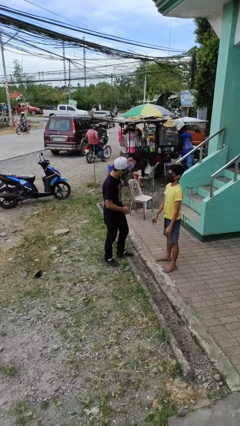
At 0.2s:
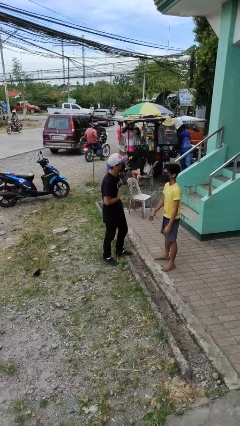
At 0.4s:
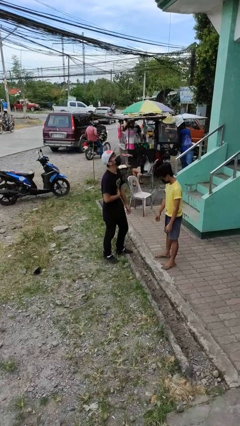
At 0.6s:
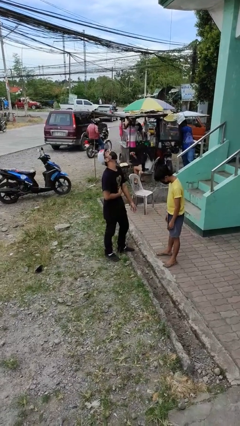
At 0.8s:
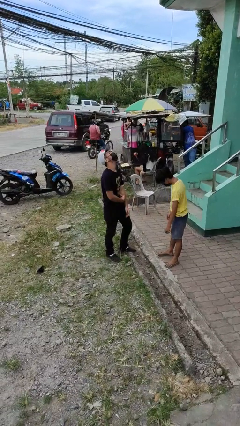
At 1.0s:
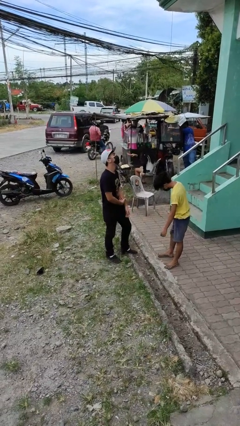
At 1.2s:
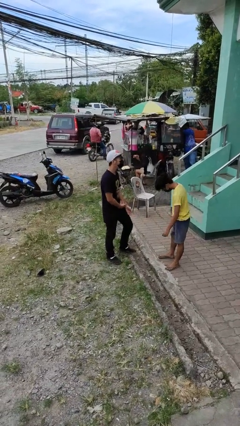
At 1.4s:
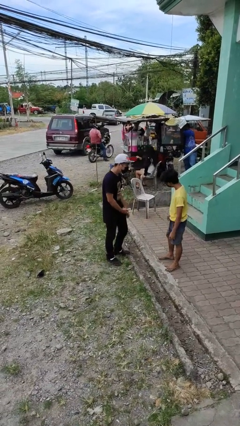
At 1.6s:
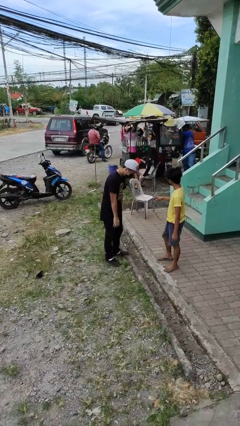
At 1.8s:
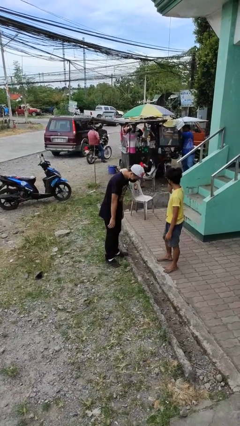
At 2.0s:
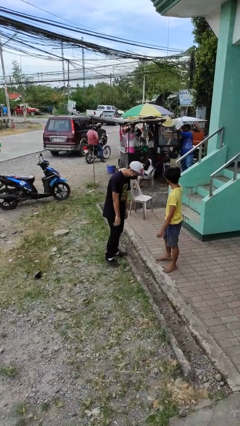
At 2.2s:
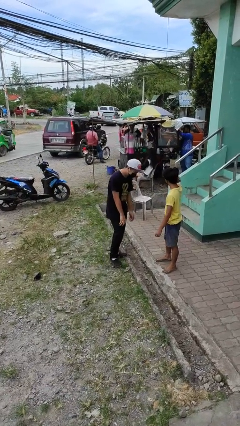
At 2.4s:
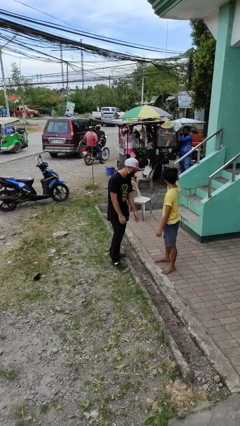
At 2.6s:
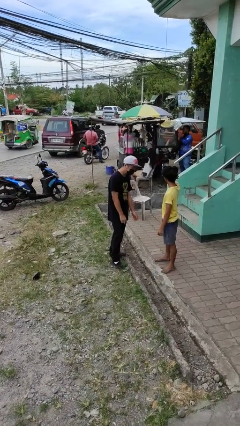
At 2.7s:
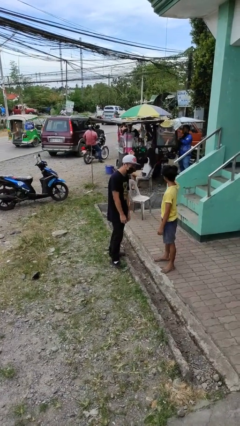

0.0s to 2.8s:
person laughs with person

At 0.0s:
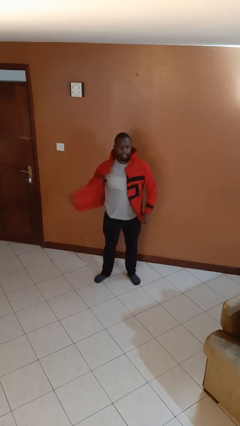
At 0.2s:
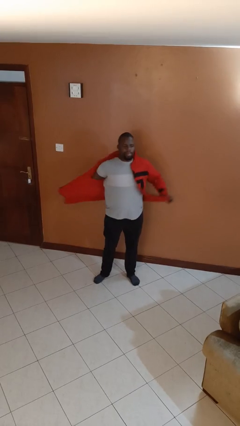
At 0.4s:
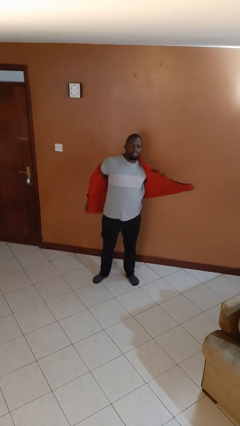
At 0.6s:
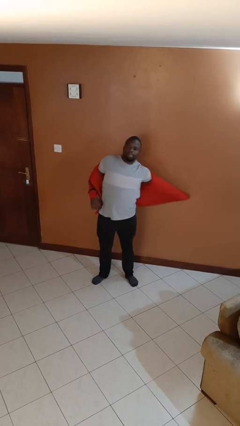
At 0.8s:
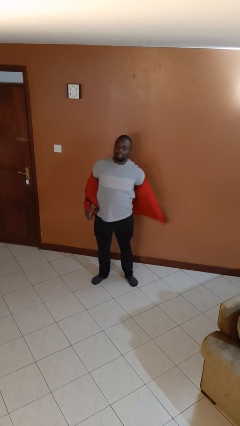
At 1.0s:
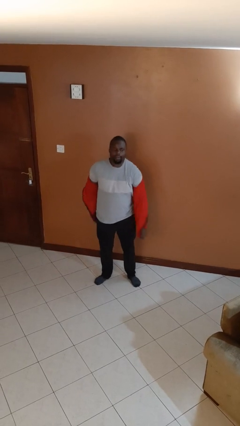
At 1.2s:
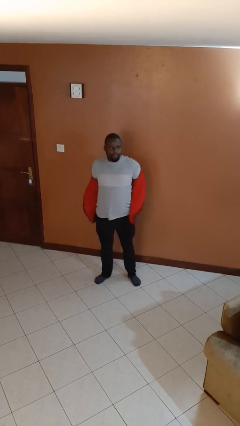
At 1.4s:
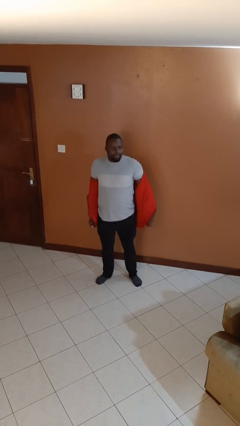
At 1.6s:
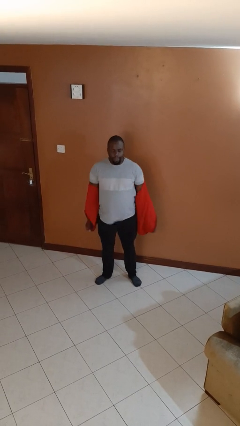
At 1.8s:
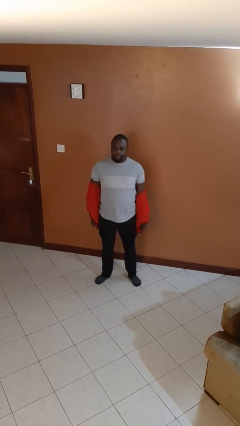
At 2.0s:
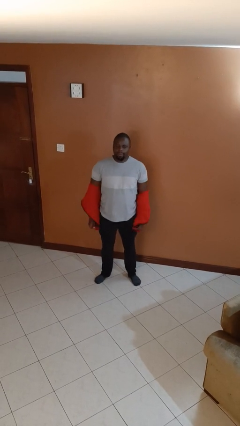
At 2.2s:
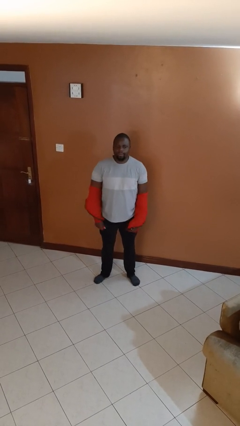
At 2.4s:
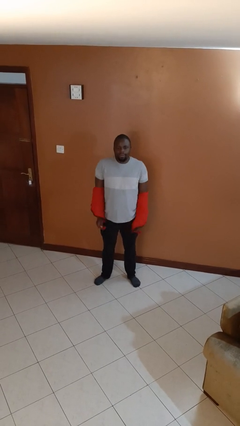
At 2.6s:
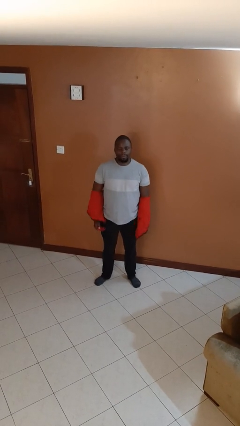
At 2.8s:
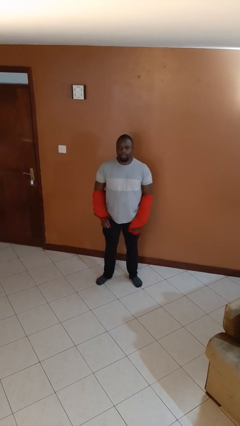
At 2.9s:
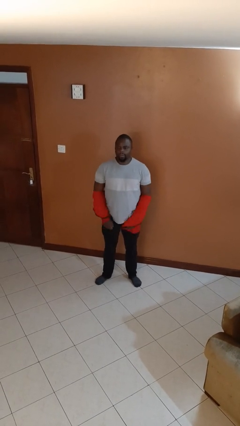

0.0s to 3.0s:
person takes off jacket

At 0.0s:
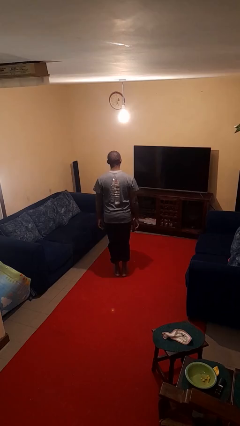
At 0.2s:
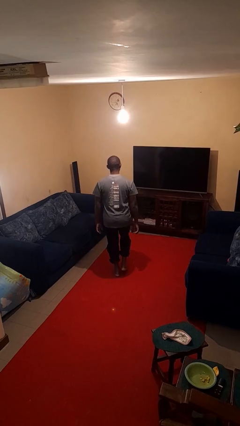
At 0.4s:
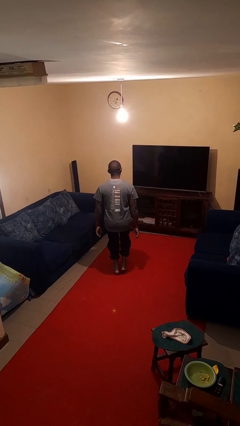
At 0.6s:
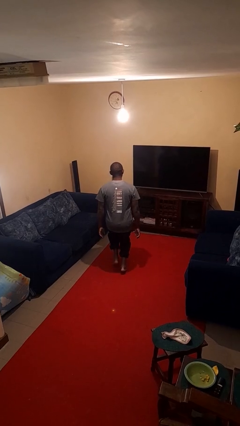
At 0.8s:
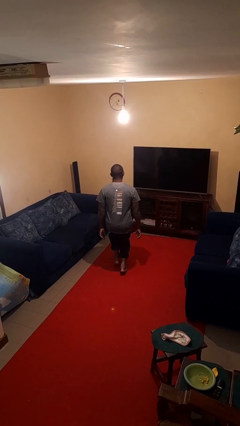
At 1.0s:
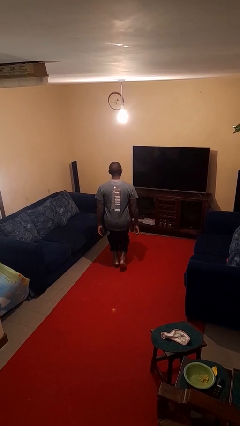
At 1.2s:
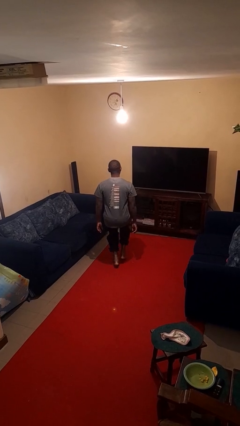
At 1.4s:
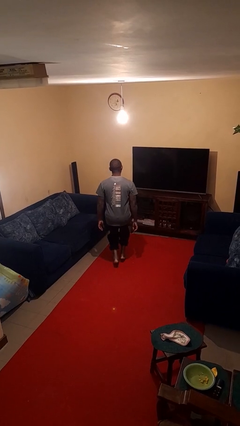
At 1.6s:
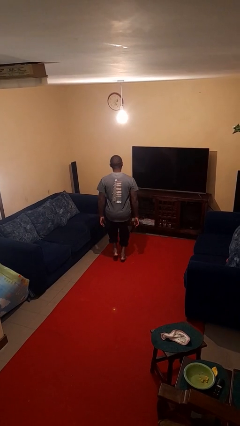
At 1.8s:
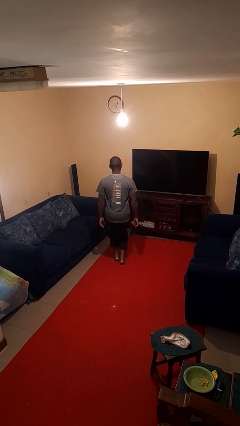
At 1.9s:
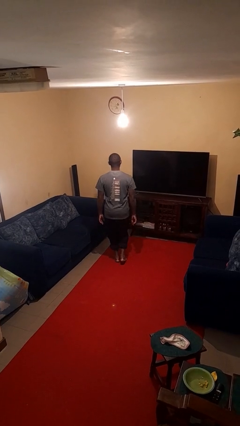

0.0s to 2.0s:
person walks tiptoe

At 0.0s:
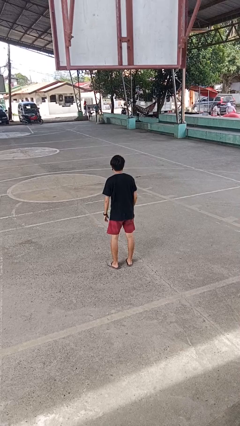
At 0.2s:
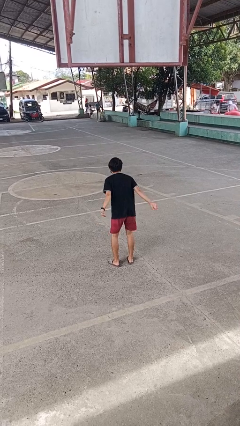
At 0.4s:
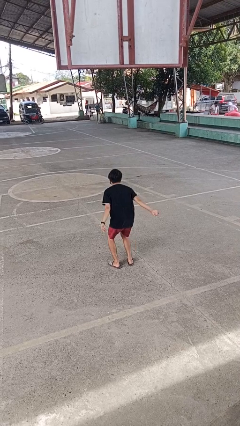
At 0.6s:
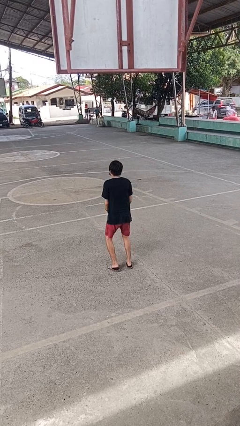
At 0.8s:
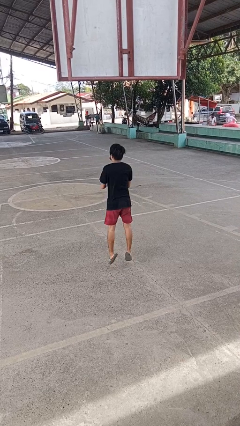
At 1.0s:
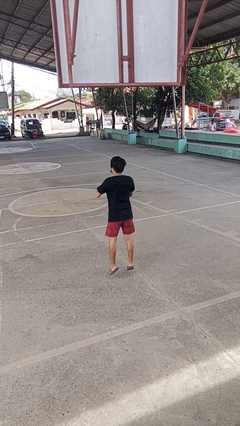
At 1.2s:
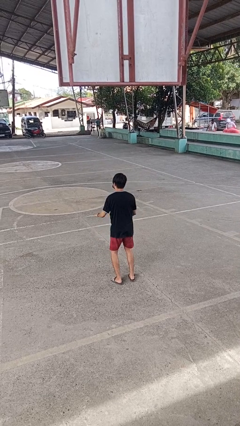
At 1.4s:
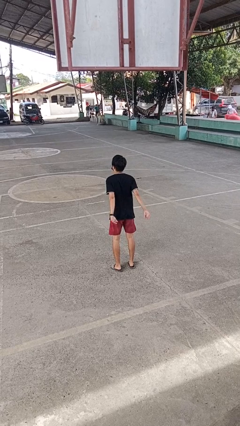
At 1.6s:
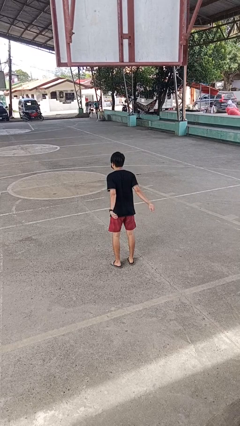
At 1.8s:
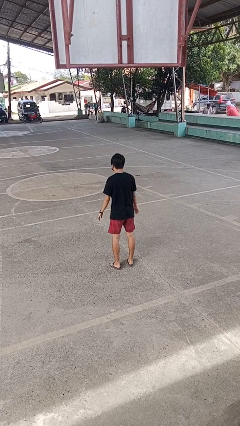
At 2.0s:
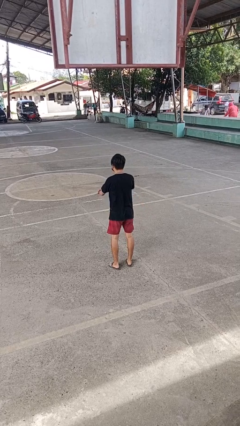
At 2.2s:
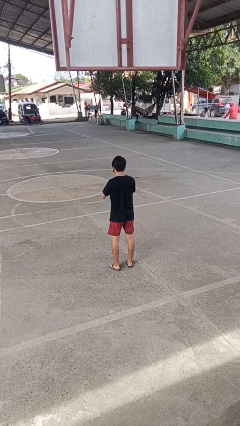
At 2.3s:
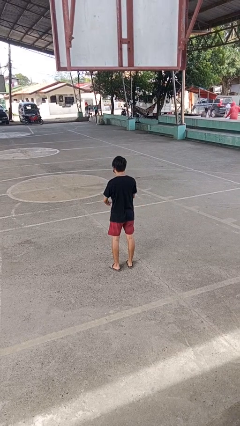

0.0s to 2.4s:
person jumps

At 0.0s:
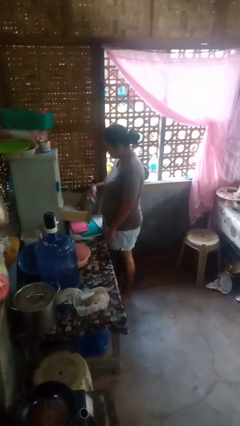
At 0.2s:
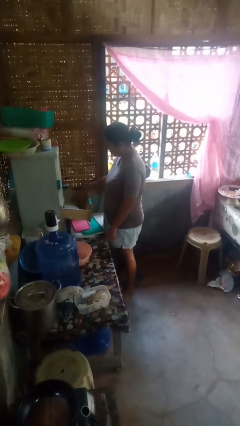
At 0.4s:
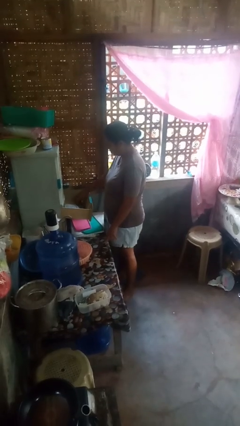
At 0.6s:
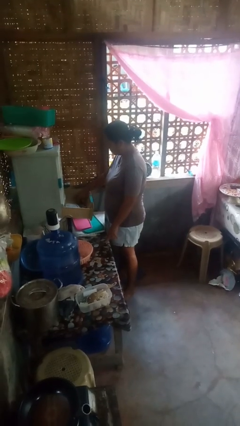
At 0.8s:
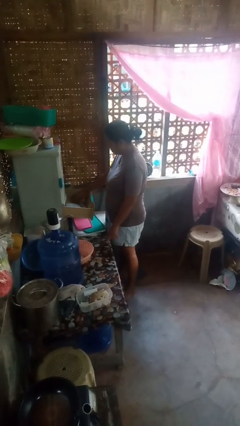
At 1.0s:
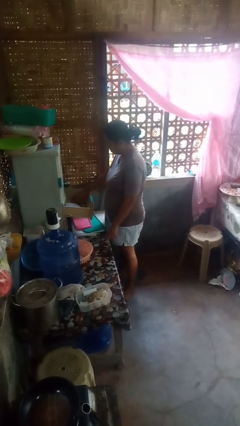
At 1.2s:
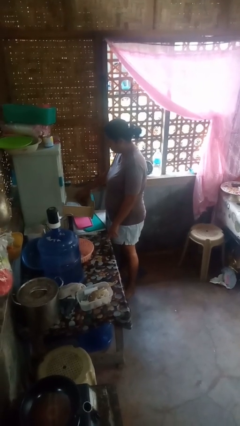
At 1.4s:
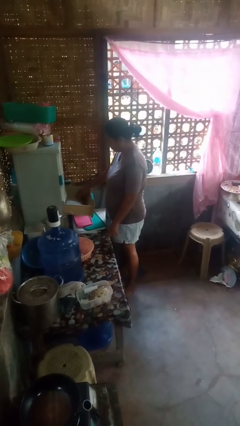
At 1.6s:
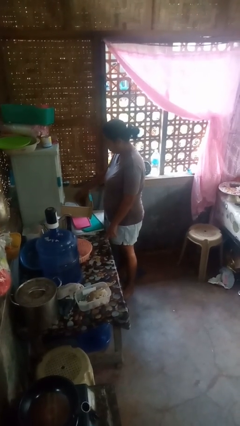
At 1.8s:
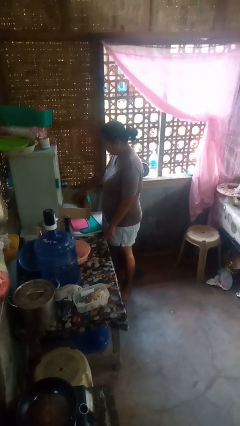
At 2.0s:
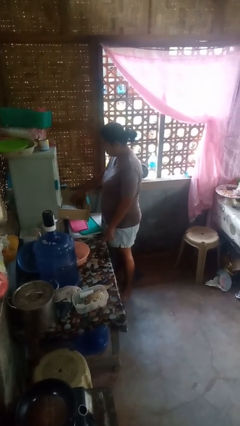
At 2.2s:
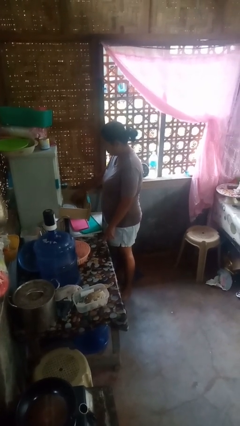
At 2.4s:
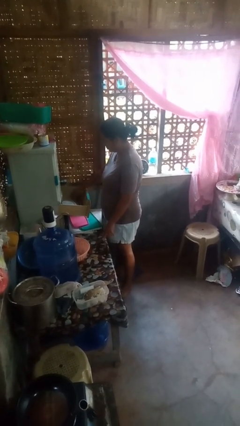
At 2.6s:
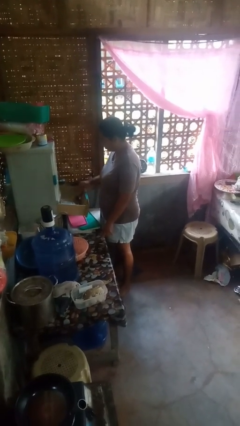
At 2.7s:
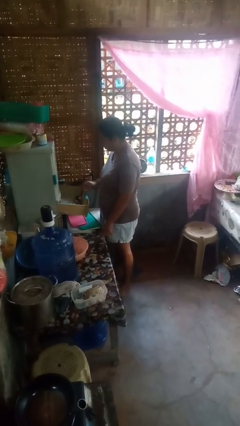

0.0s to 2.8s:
person searches in kitchen drawer

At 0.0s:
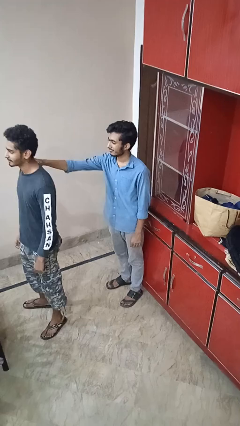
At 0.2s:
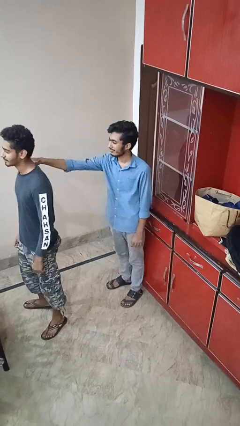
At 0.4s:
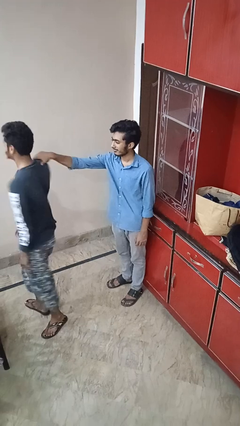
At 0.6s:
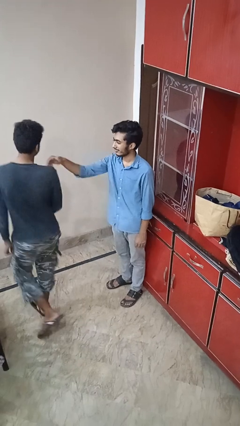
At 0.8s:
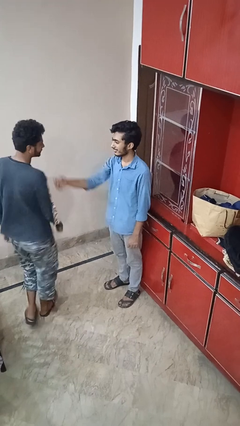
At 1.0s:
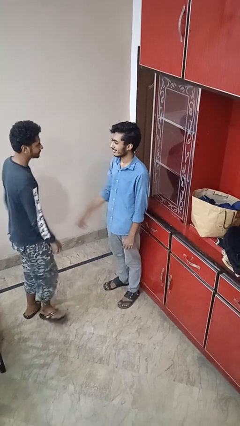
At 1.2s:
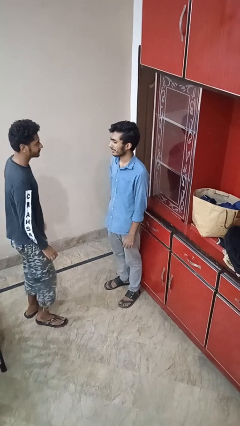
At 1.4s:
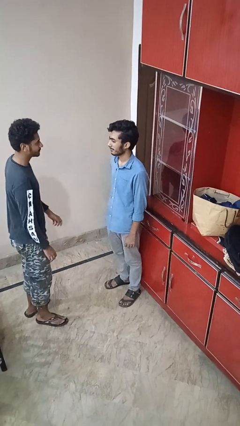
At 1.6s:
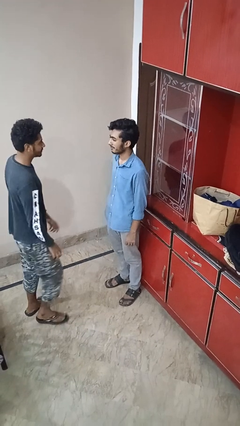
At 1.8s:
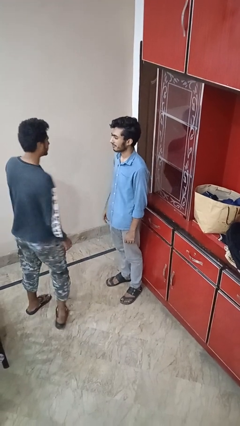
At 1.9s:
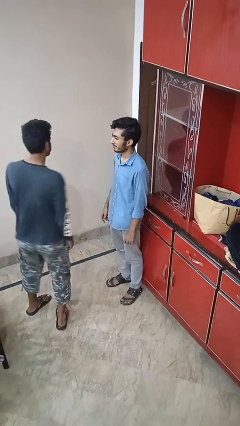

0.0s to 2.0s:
person spins person around

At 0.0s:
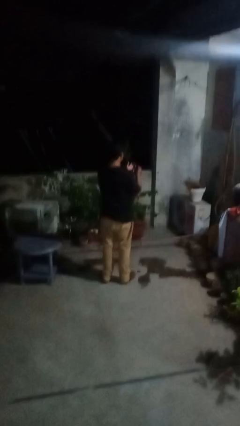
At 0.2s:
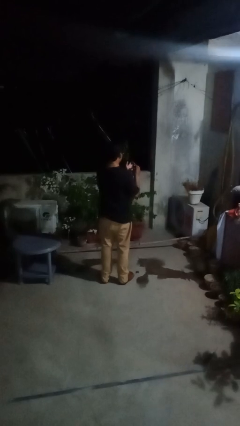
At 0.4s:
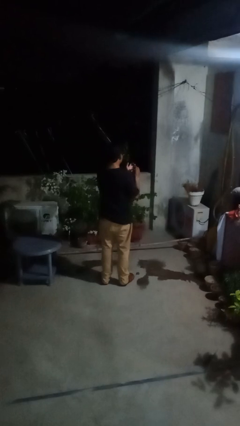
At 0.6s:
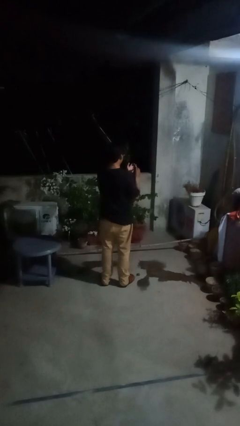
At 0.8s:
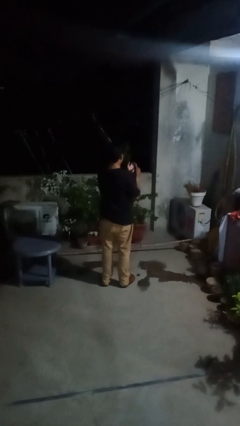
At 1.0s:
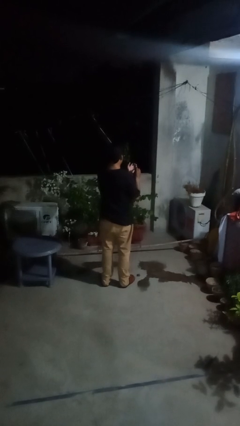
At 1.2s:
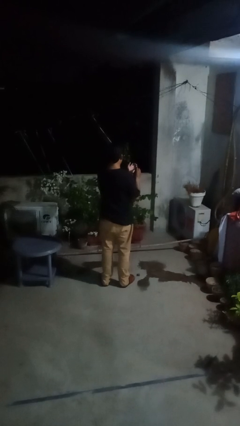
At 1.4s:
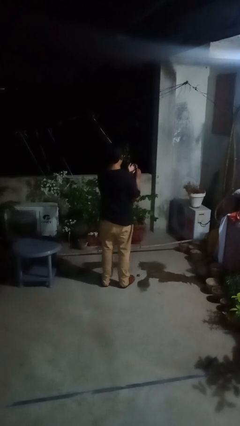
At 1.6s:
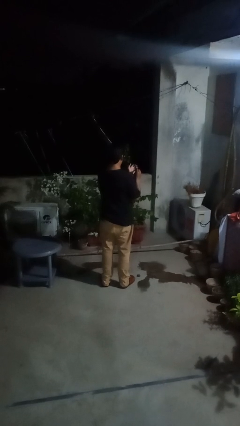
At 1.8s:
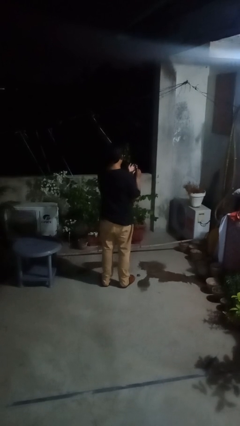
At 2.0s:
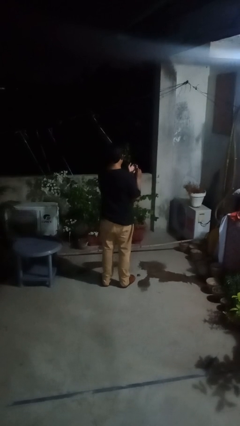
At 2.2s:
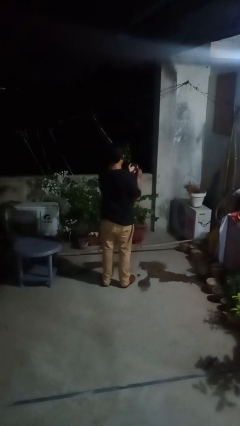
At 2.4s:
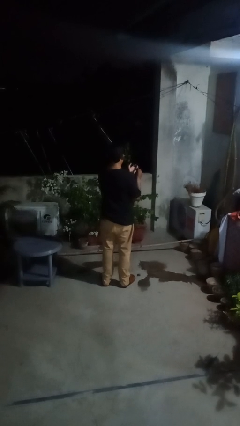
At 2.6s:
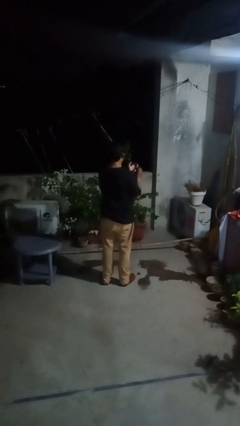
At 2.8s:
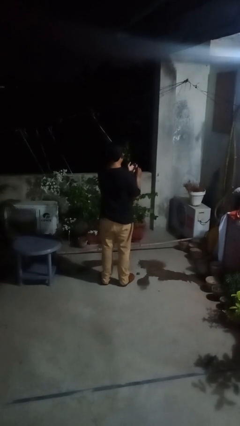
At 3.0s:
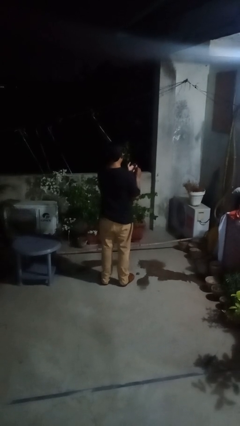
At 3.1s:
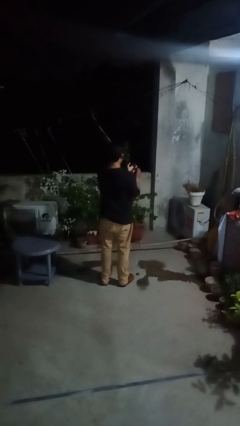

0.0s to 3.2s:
person clips fingernails
